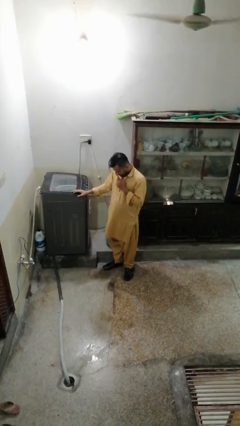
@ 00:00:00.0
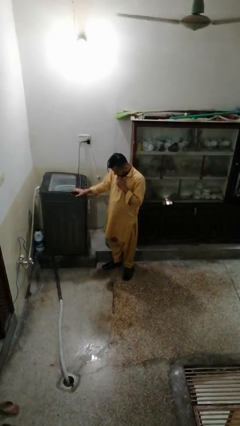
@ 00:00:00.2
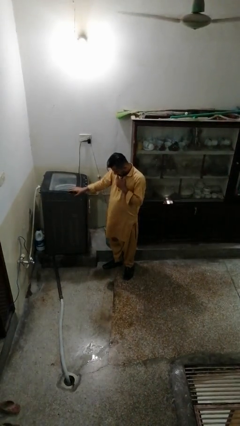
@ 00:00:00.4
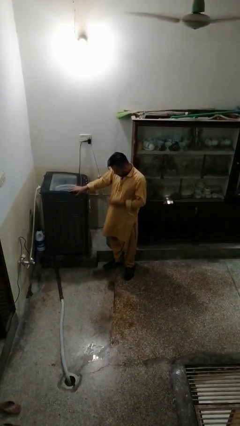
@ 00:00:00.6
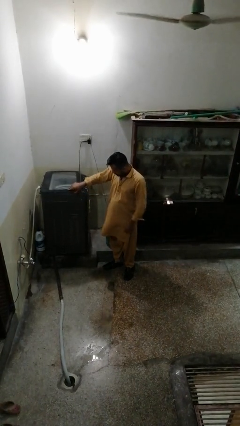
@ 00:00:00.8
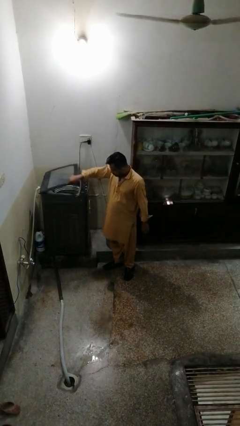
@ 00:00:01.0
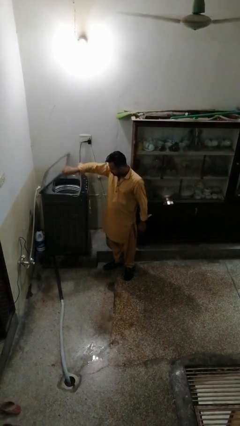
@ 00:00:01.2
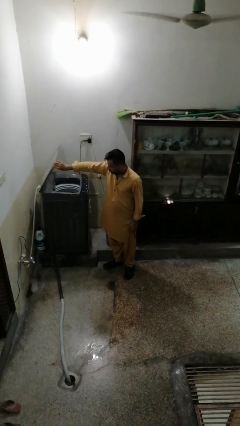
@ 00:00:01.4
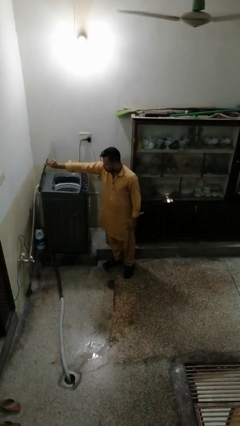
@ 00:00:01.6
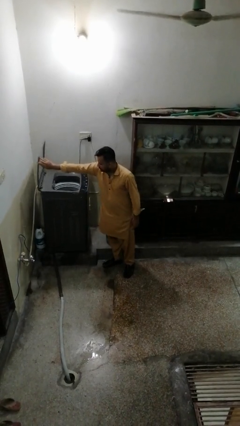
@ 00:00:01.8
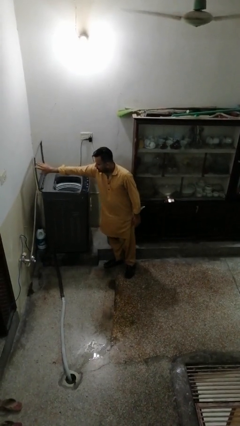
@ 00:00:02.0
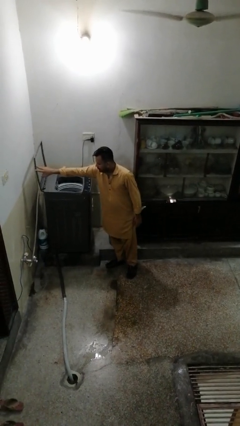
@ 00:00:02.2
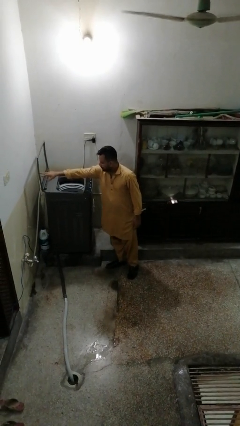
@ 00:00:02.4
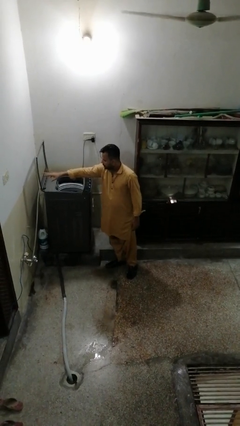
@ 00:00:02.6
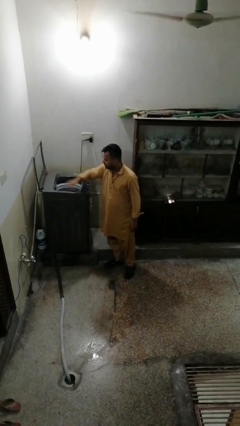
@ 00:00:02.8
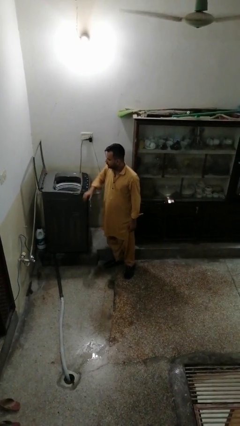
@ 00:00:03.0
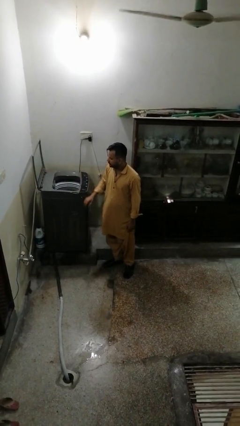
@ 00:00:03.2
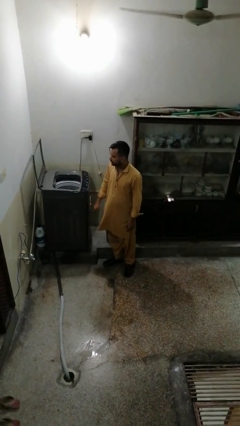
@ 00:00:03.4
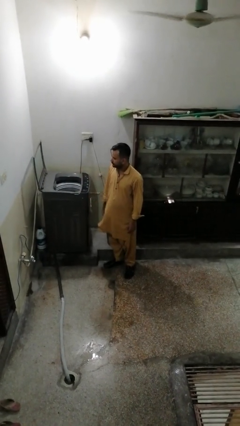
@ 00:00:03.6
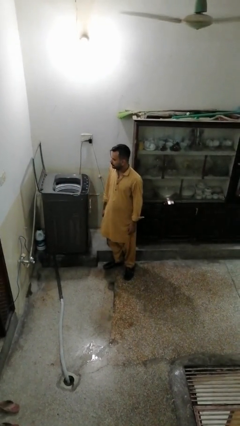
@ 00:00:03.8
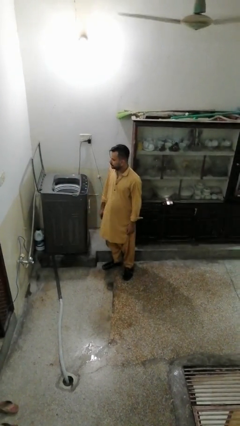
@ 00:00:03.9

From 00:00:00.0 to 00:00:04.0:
person opens clothes washer

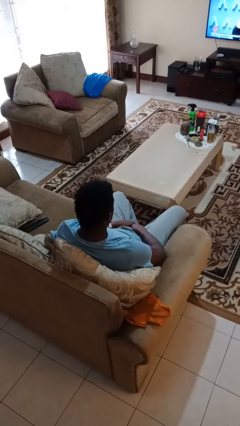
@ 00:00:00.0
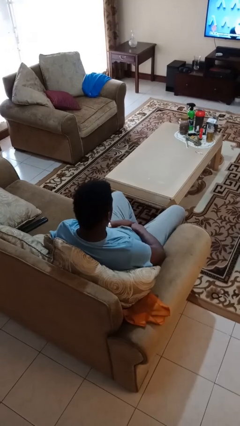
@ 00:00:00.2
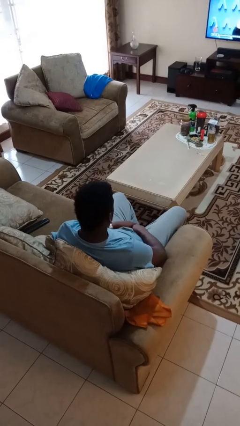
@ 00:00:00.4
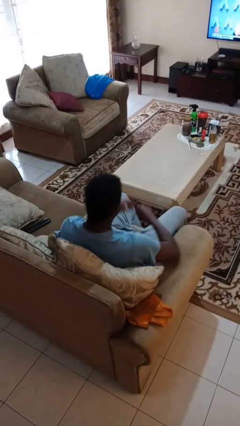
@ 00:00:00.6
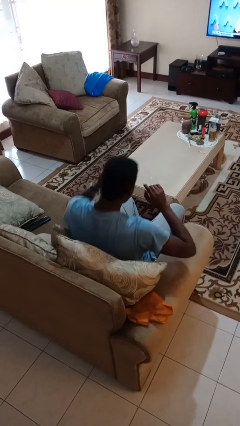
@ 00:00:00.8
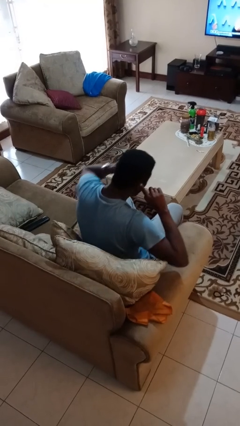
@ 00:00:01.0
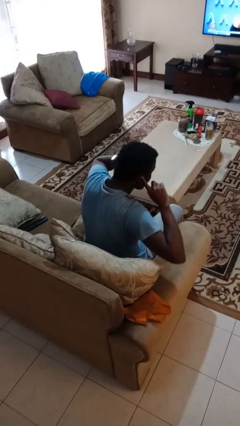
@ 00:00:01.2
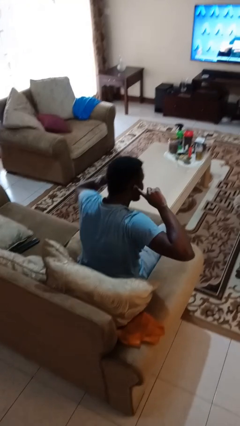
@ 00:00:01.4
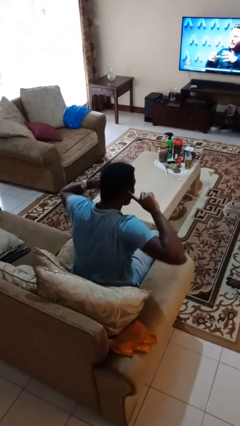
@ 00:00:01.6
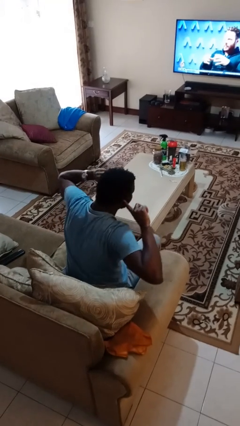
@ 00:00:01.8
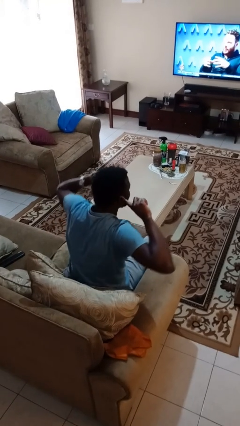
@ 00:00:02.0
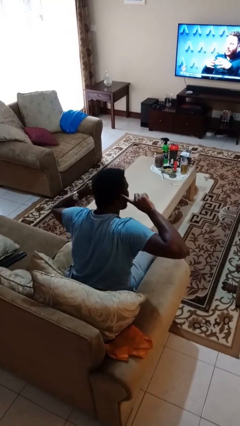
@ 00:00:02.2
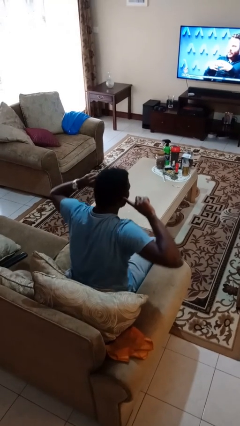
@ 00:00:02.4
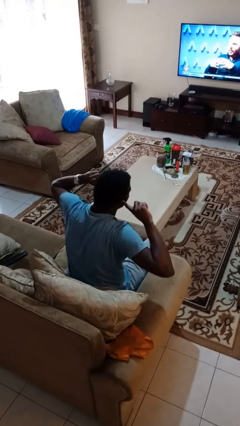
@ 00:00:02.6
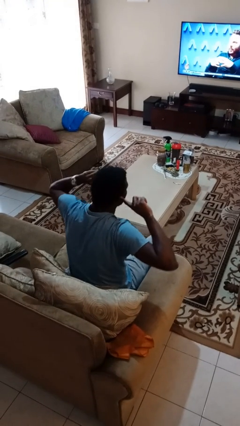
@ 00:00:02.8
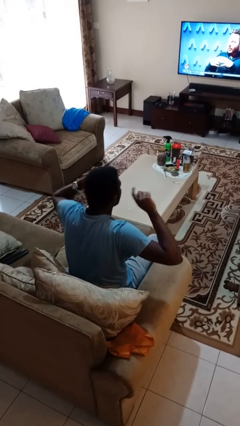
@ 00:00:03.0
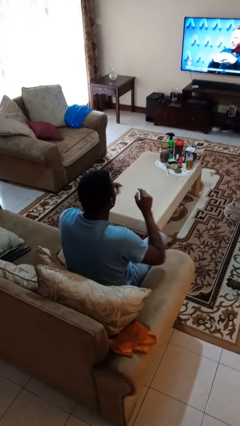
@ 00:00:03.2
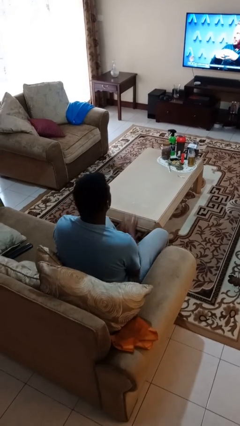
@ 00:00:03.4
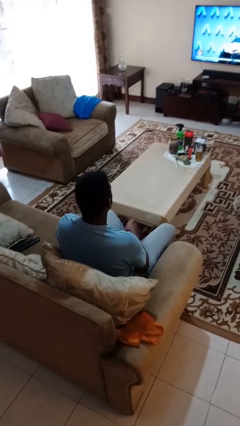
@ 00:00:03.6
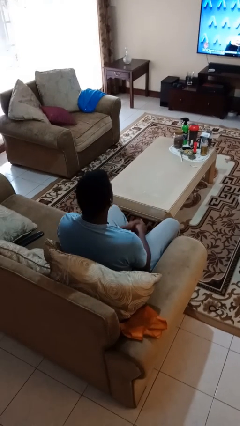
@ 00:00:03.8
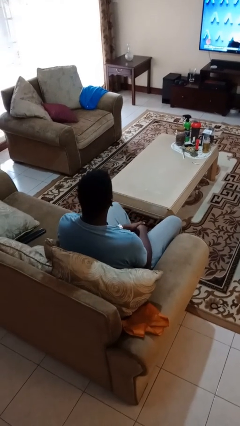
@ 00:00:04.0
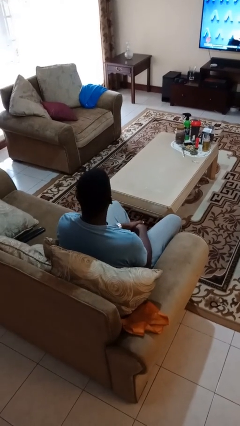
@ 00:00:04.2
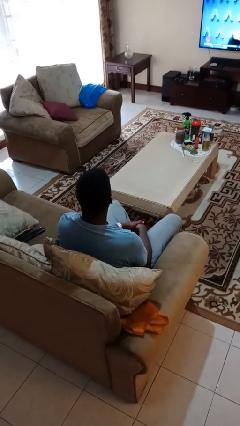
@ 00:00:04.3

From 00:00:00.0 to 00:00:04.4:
person puts fingers in ear

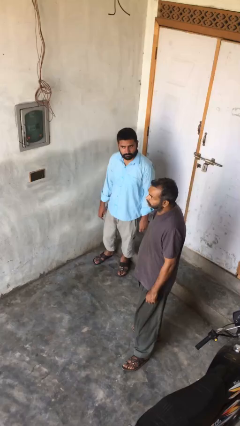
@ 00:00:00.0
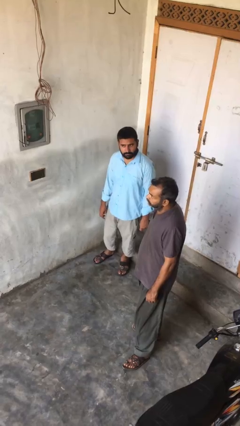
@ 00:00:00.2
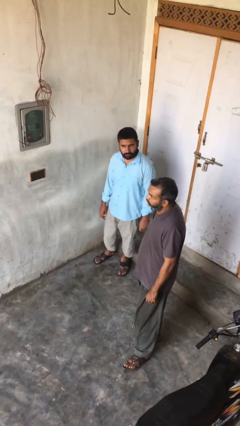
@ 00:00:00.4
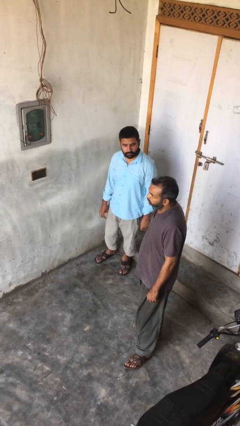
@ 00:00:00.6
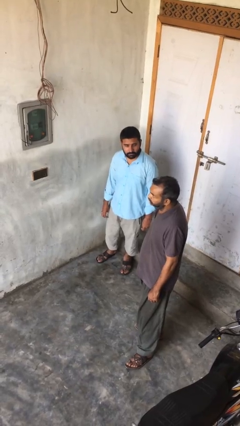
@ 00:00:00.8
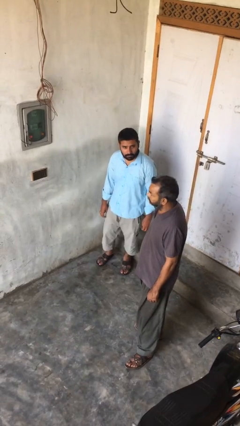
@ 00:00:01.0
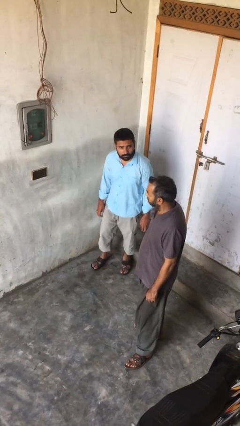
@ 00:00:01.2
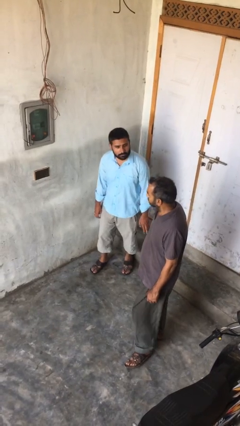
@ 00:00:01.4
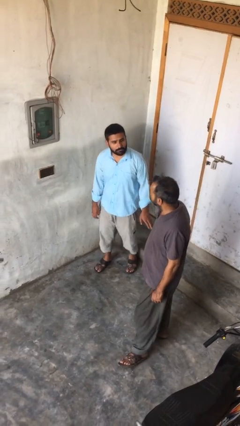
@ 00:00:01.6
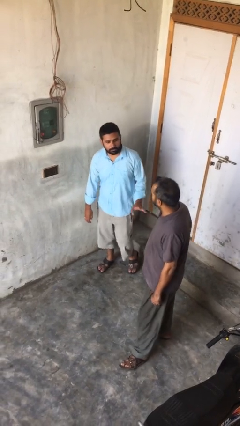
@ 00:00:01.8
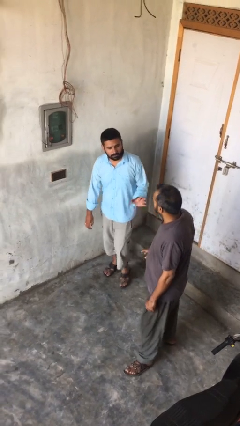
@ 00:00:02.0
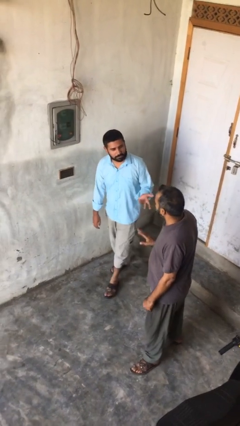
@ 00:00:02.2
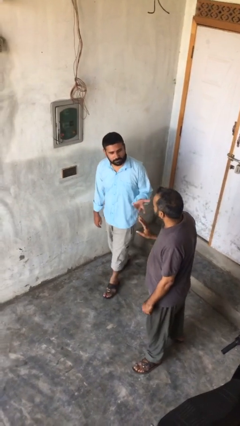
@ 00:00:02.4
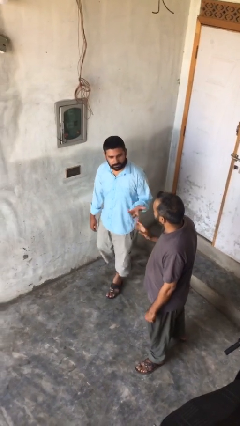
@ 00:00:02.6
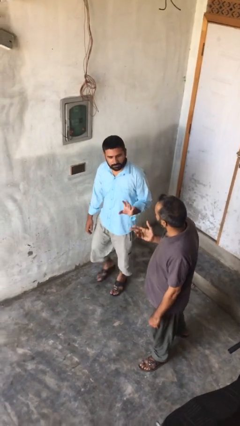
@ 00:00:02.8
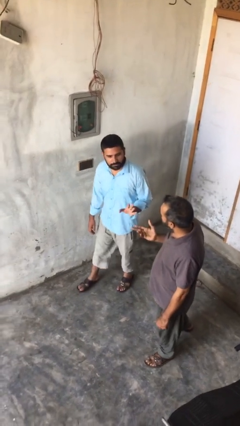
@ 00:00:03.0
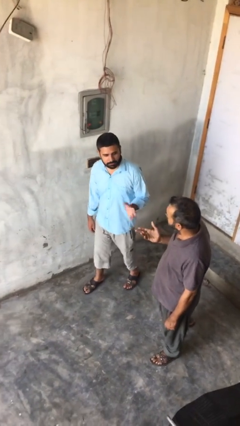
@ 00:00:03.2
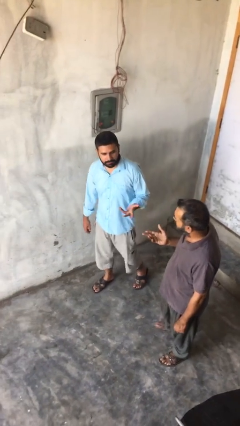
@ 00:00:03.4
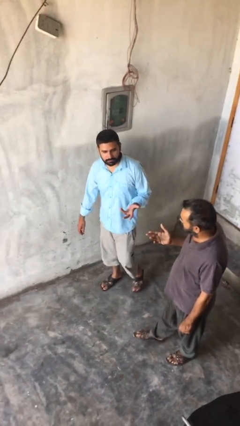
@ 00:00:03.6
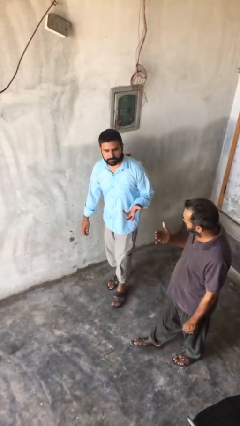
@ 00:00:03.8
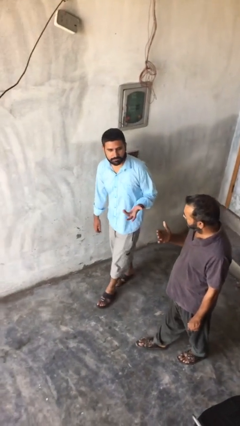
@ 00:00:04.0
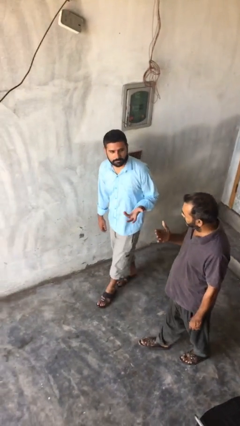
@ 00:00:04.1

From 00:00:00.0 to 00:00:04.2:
person talks to person

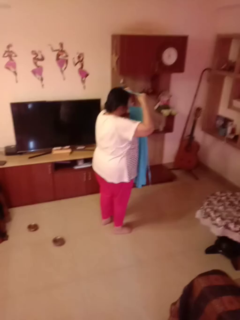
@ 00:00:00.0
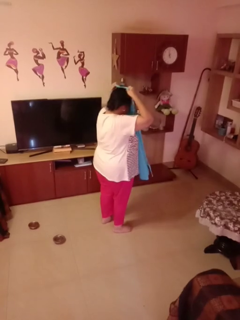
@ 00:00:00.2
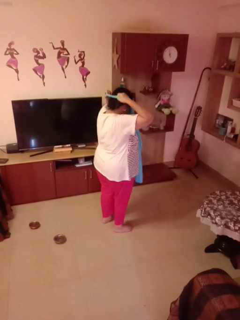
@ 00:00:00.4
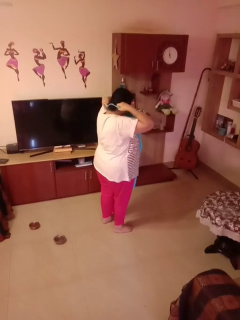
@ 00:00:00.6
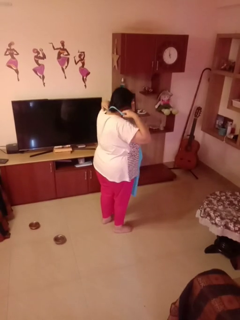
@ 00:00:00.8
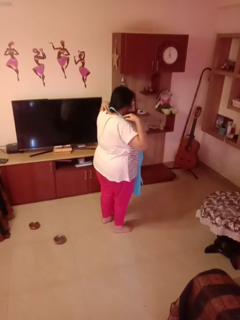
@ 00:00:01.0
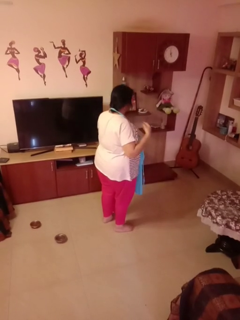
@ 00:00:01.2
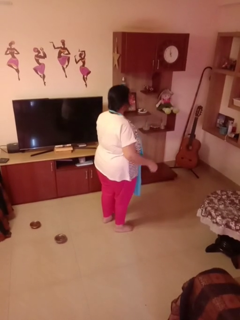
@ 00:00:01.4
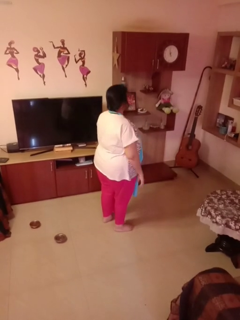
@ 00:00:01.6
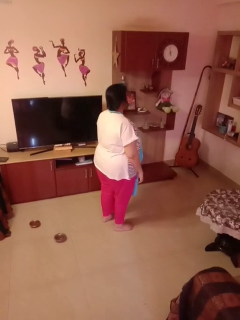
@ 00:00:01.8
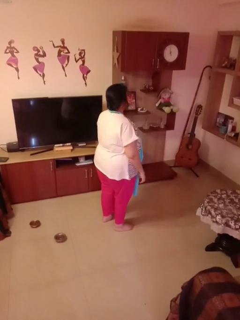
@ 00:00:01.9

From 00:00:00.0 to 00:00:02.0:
person puts on apron

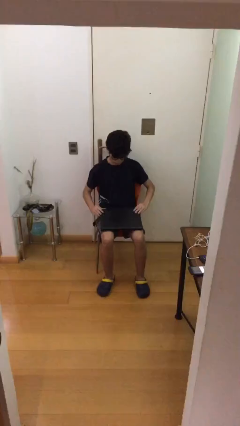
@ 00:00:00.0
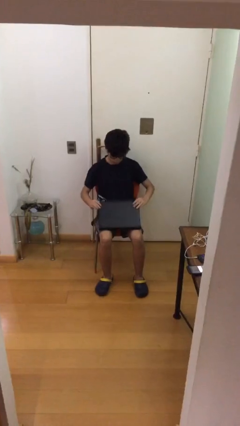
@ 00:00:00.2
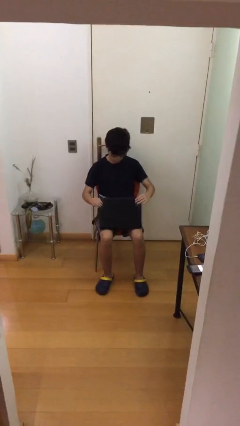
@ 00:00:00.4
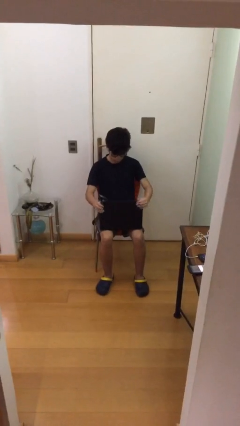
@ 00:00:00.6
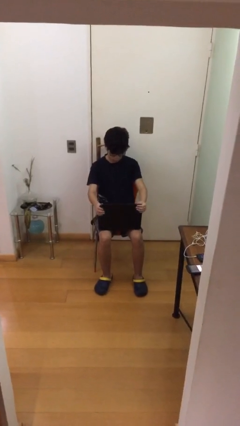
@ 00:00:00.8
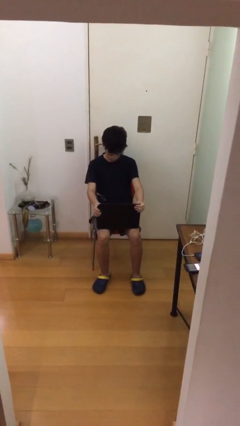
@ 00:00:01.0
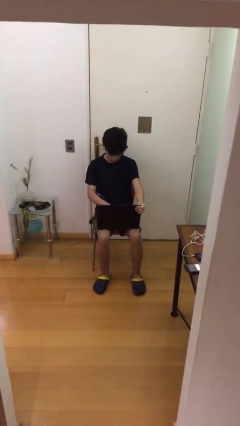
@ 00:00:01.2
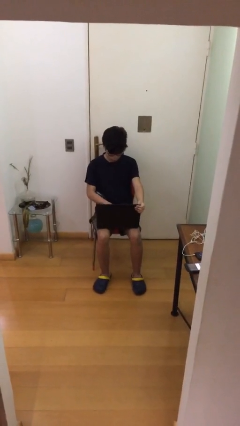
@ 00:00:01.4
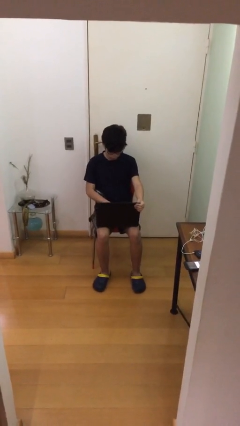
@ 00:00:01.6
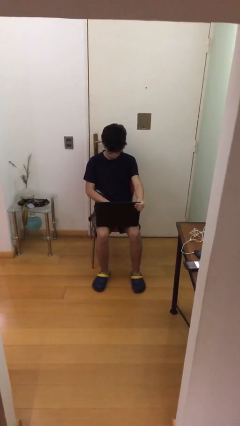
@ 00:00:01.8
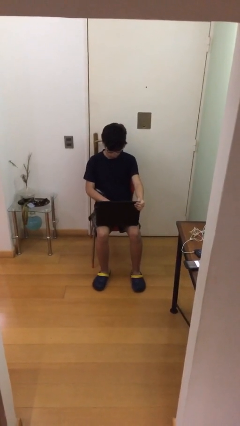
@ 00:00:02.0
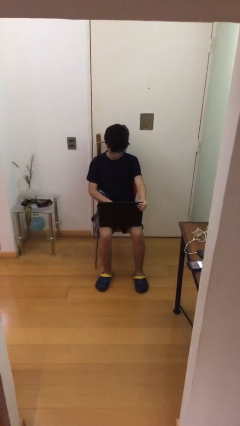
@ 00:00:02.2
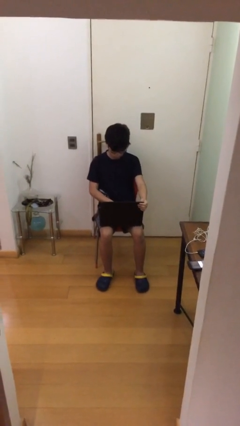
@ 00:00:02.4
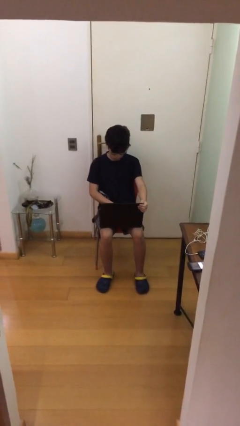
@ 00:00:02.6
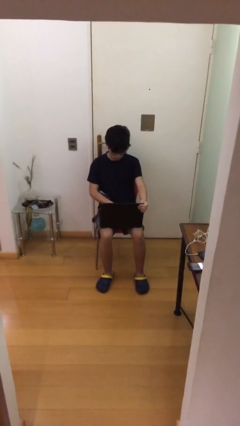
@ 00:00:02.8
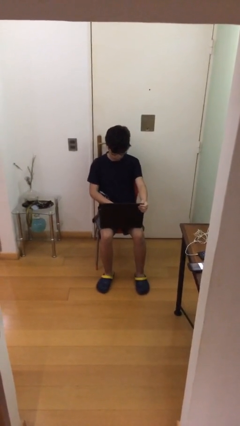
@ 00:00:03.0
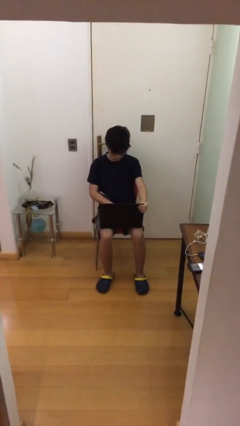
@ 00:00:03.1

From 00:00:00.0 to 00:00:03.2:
person interacts with laptop
